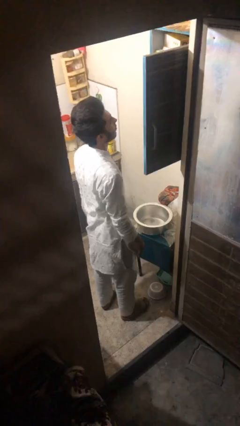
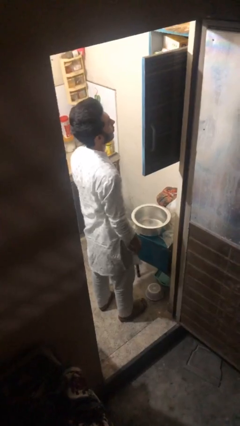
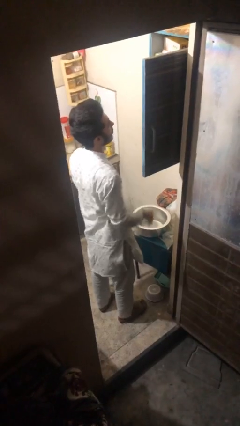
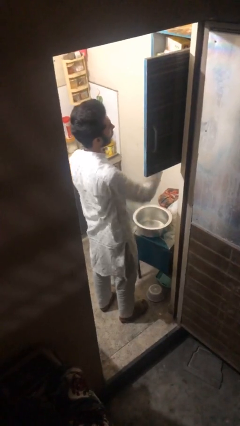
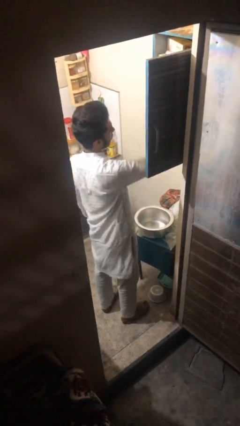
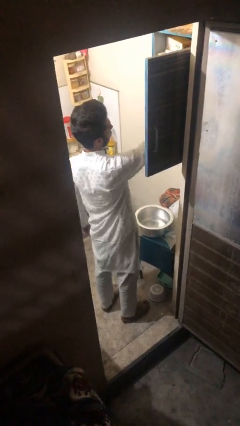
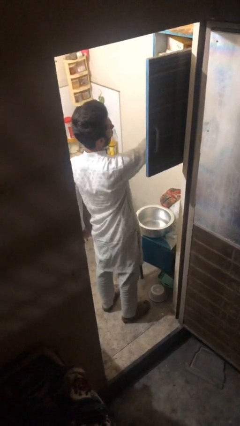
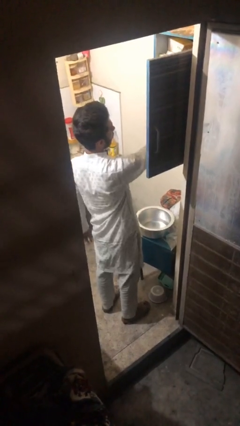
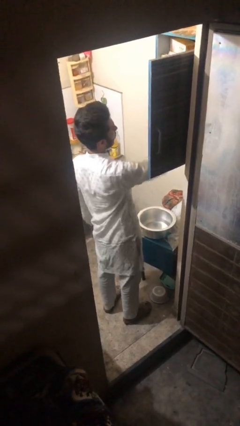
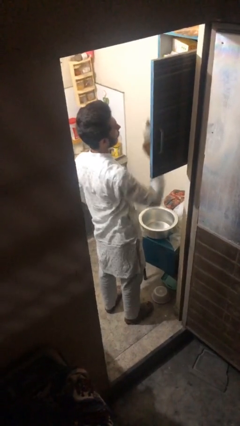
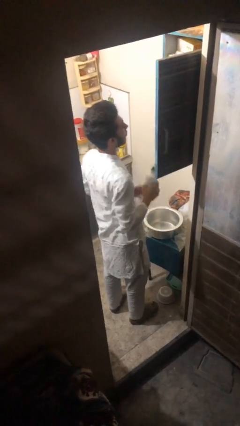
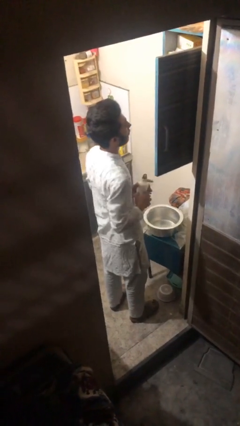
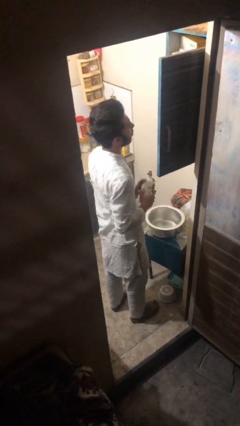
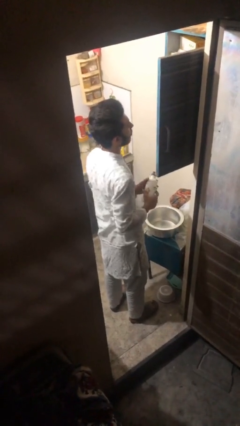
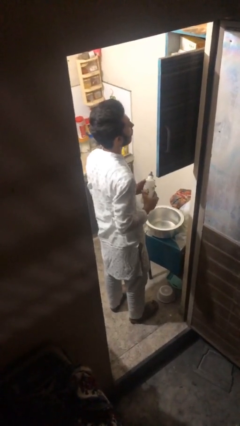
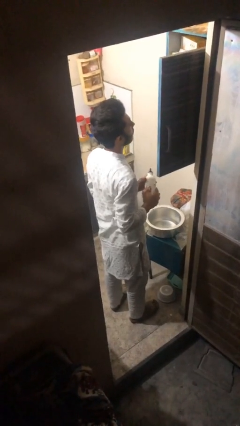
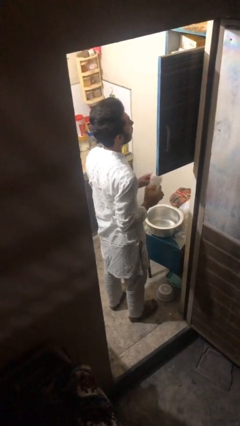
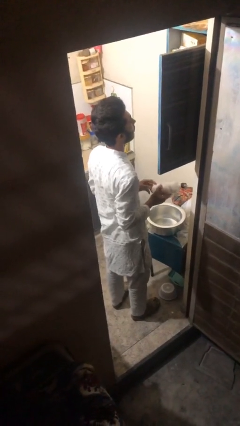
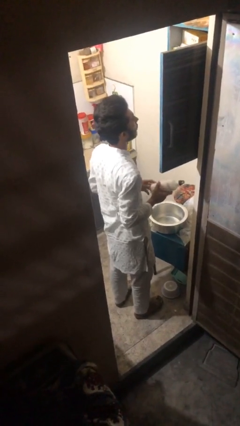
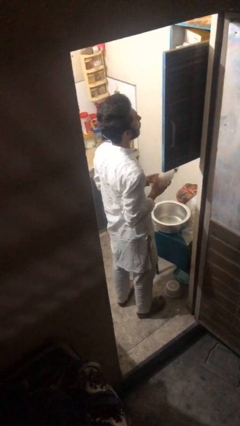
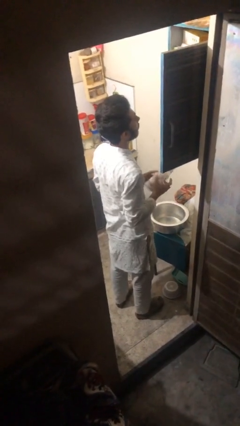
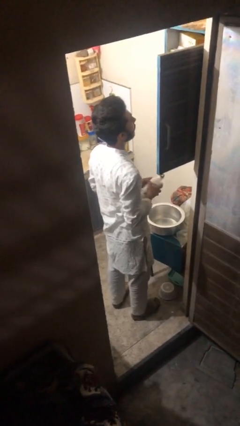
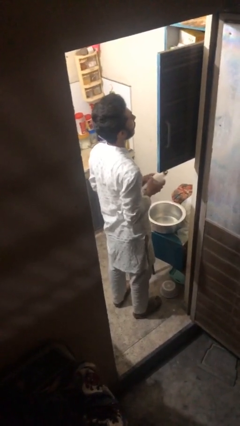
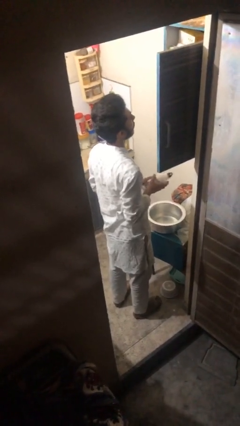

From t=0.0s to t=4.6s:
person takes object from cabinet

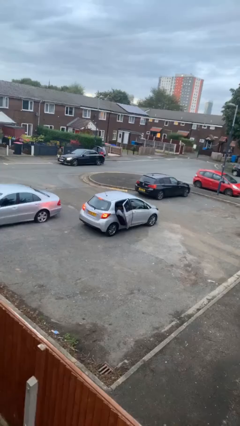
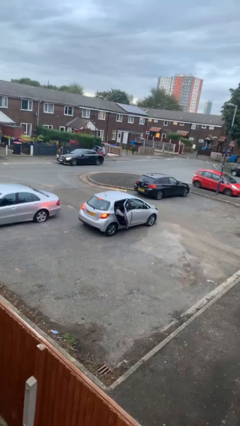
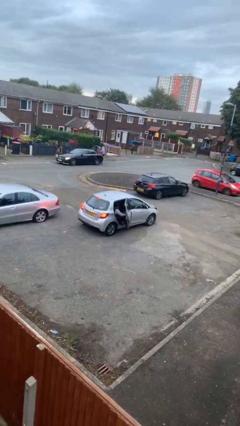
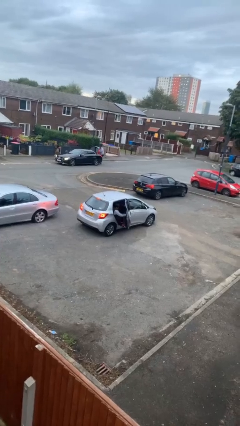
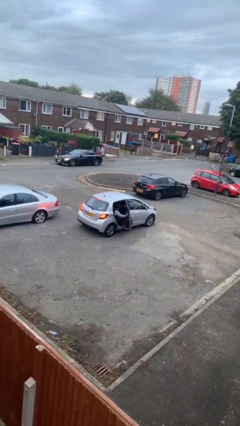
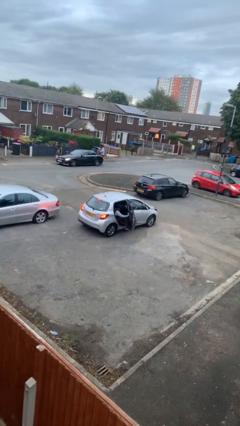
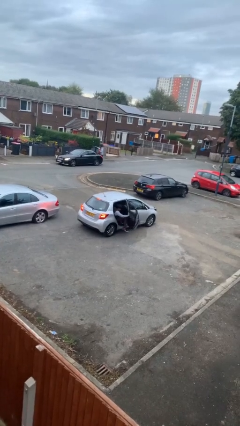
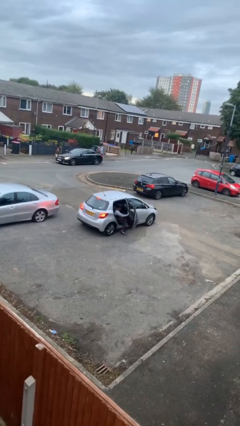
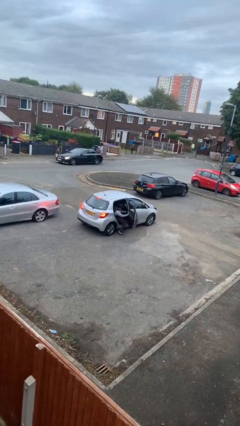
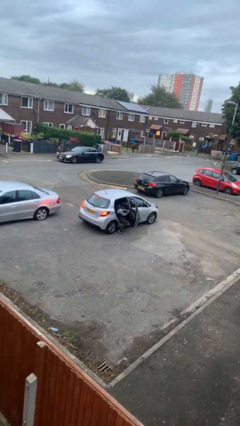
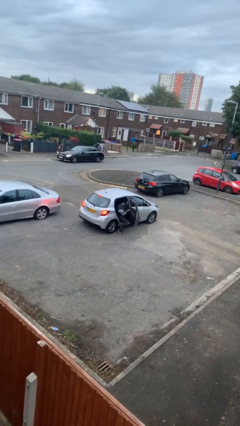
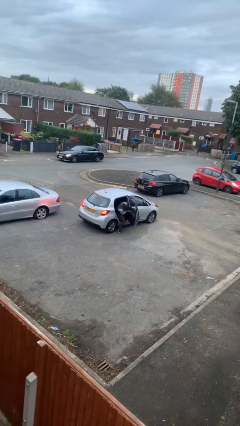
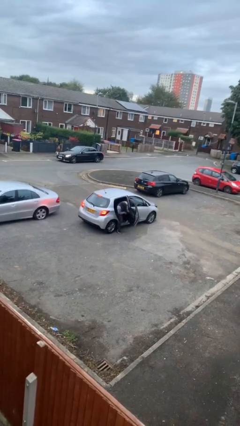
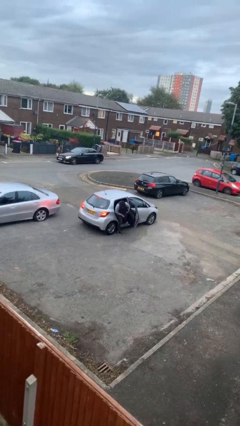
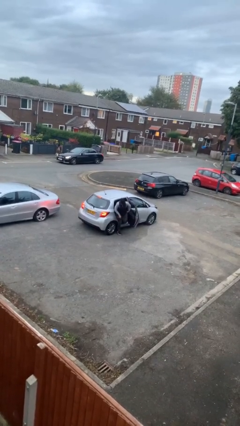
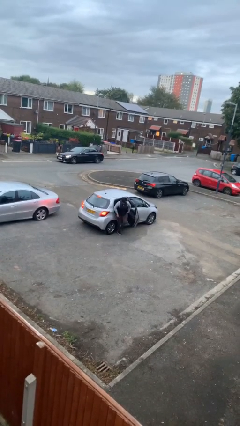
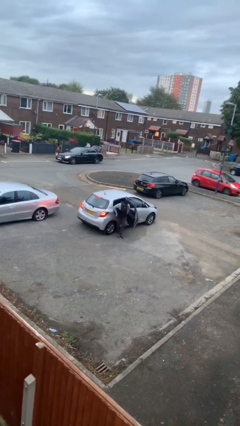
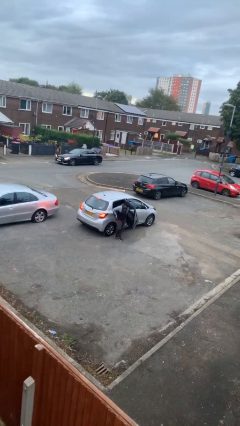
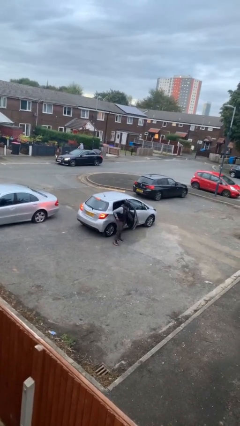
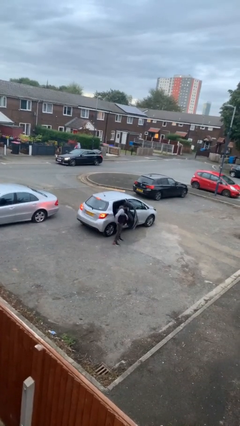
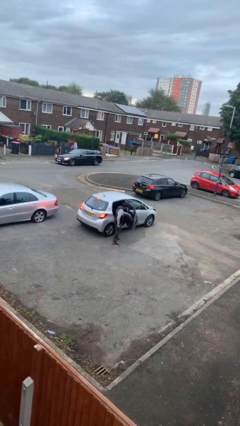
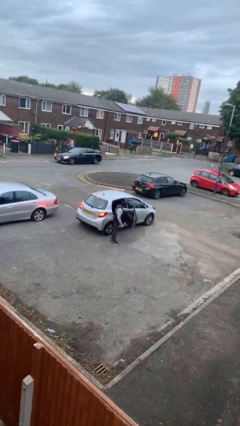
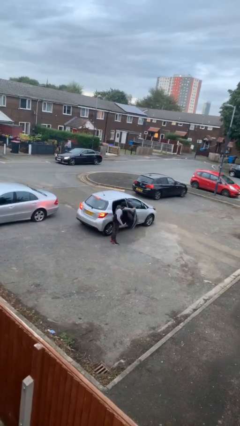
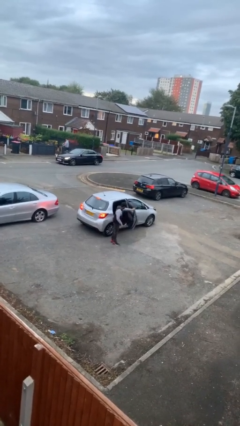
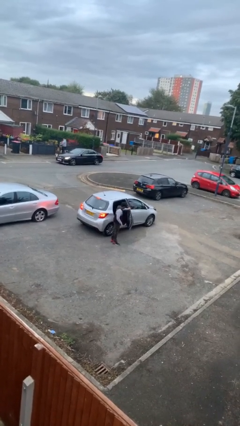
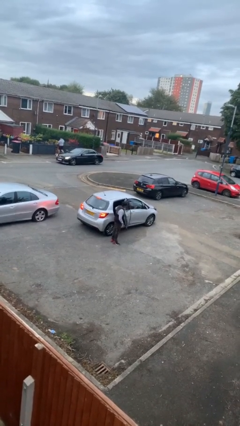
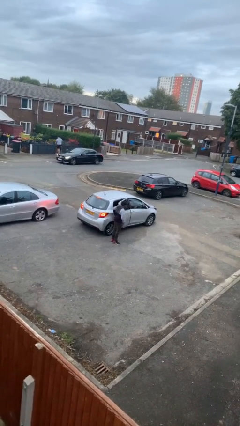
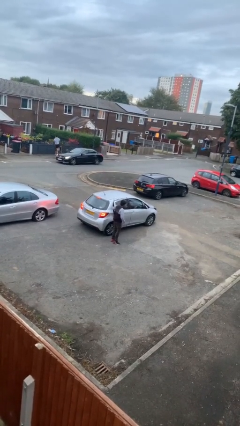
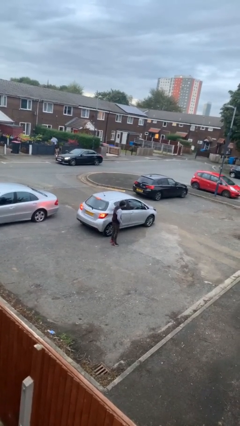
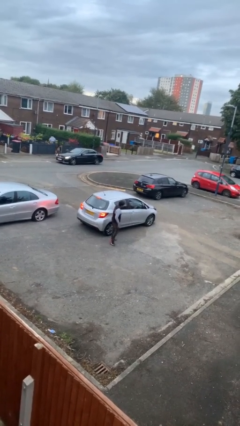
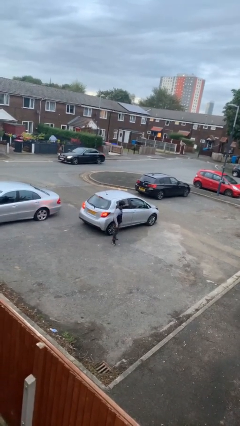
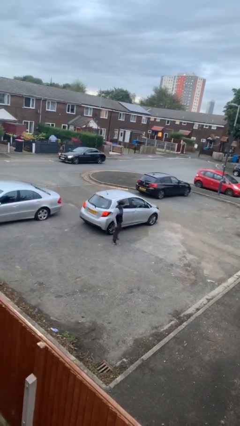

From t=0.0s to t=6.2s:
car drops off person

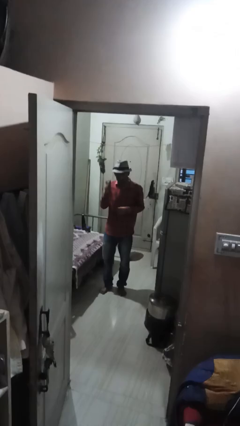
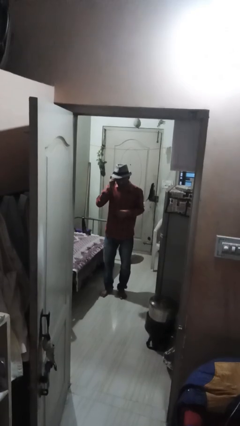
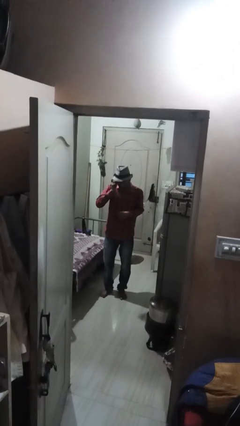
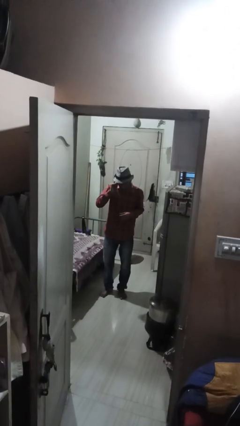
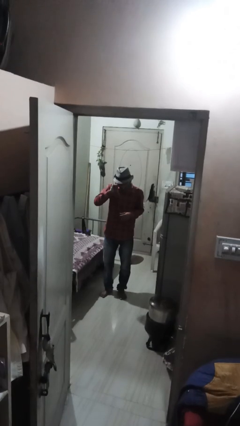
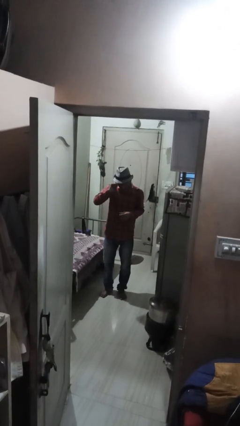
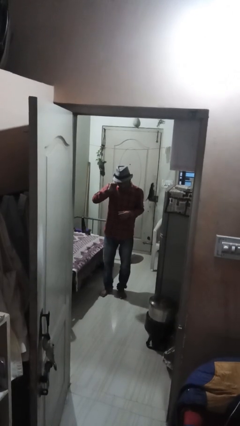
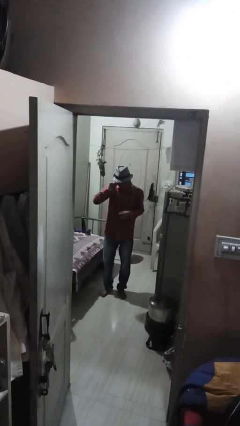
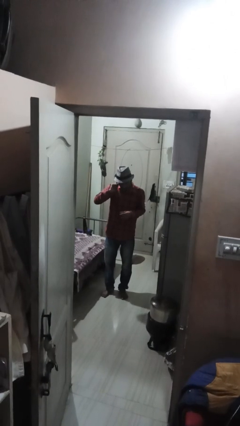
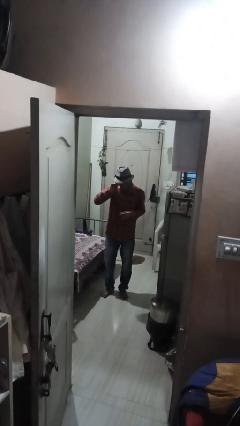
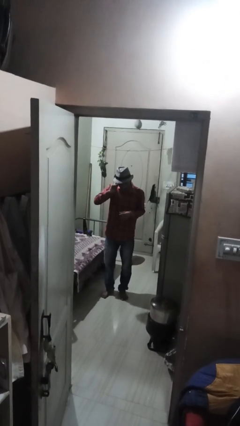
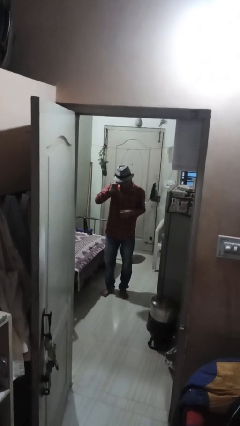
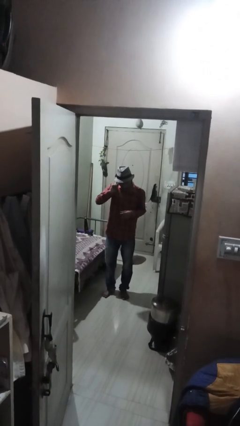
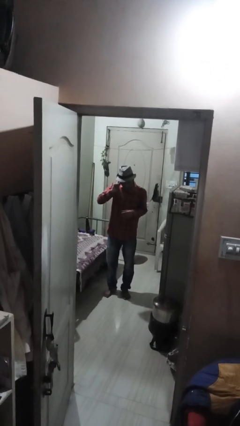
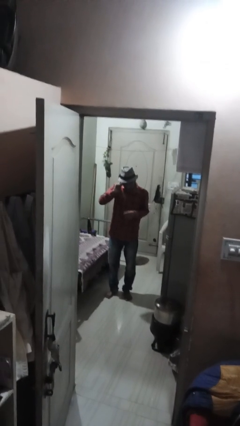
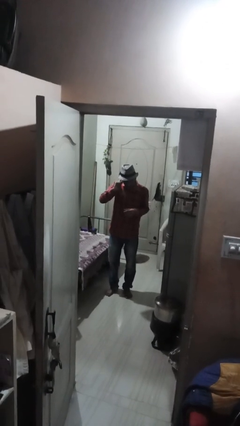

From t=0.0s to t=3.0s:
person touches earlobe

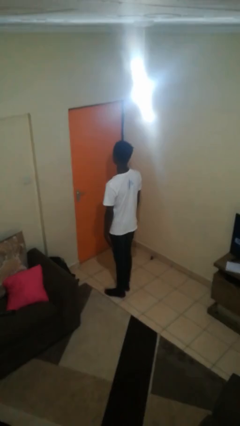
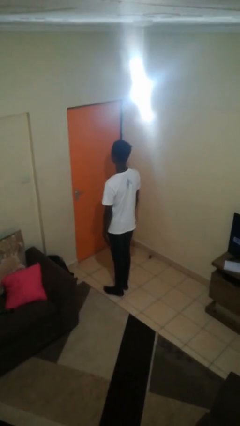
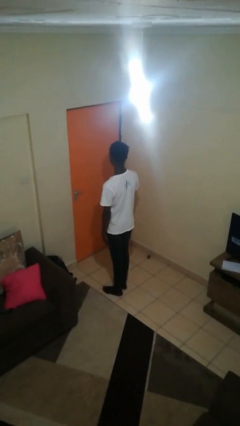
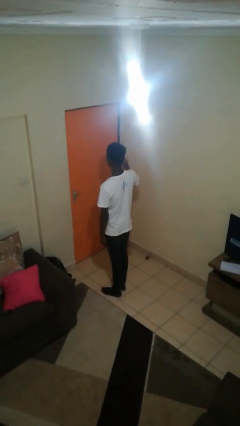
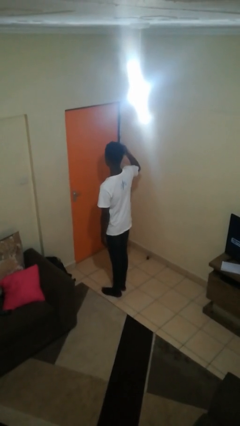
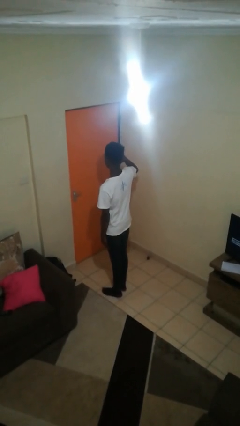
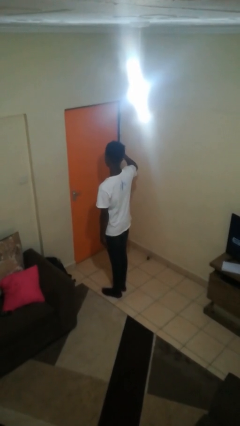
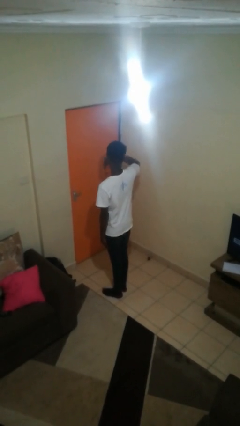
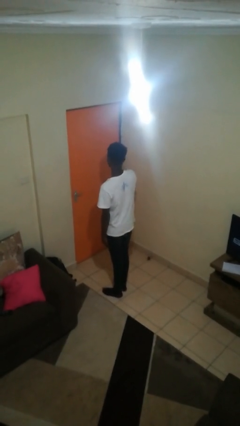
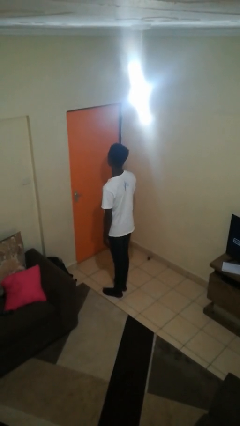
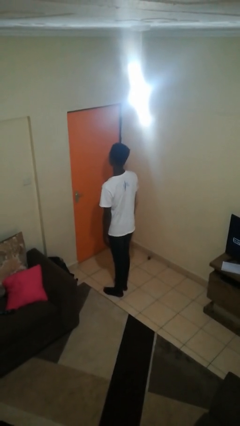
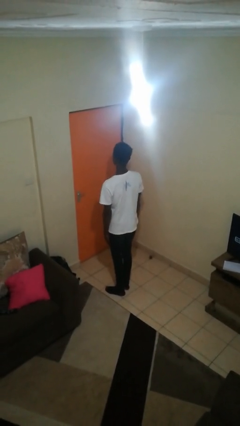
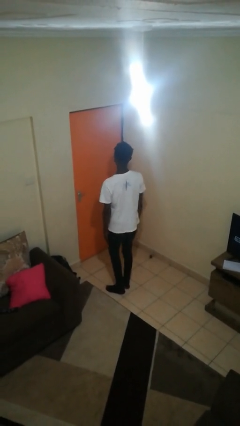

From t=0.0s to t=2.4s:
person salutes

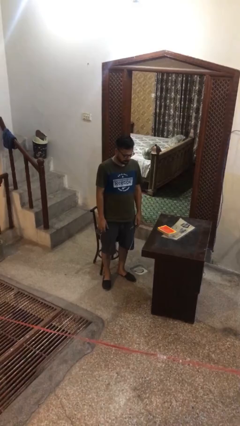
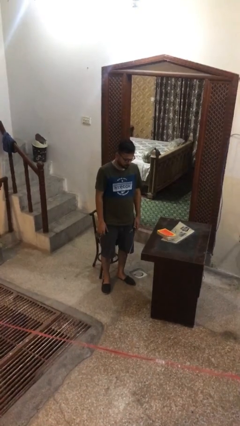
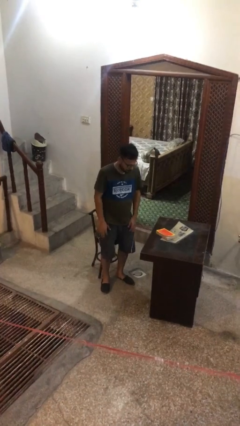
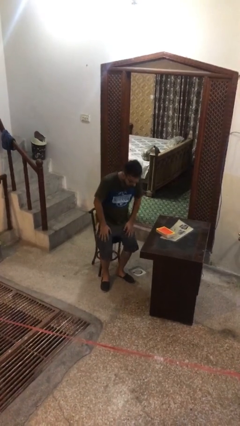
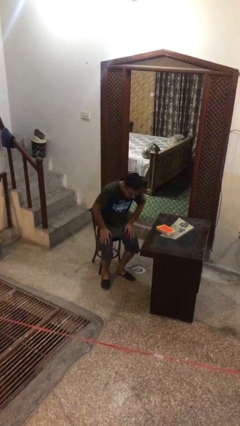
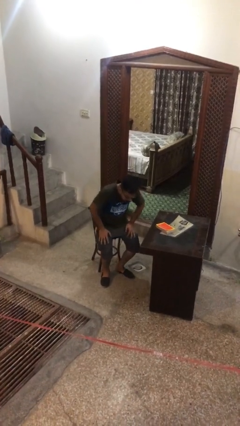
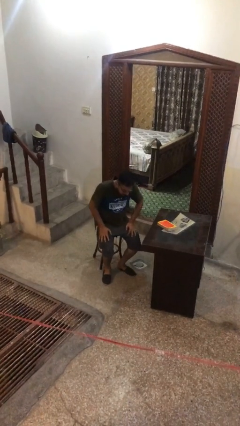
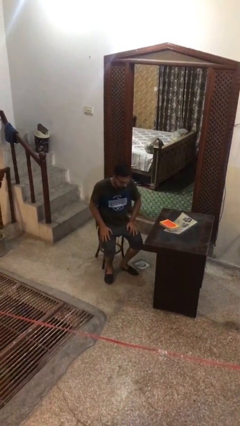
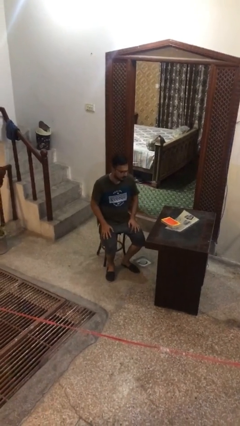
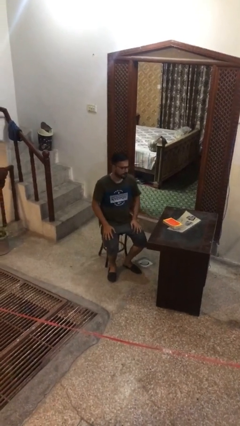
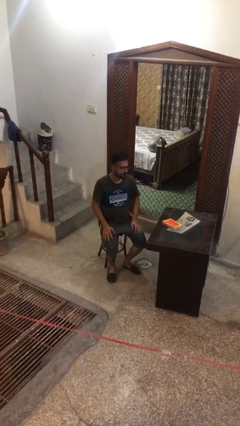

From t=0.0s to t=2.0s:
person sits down
